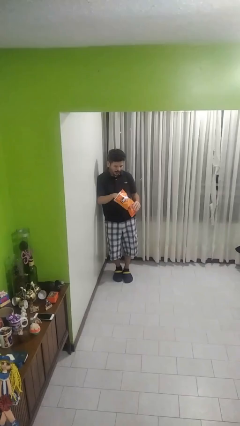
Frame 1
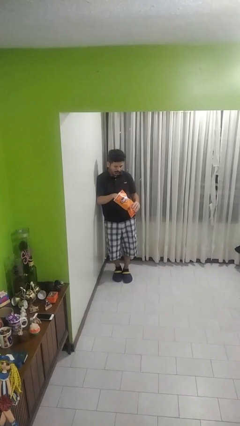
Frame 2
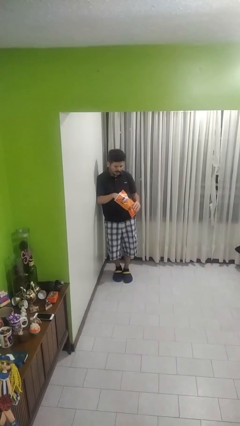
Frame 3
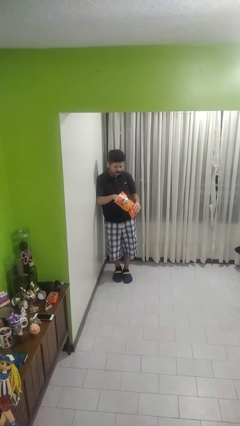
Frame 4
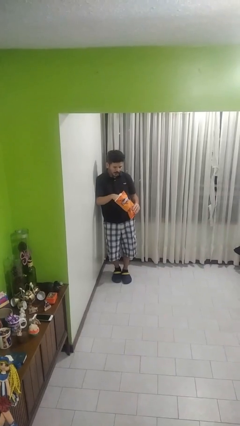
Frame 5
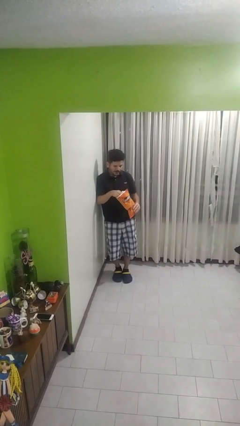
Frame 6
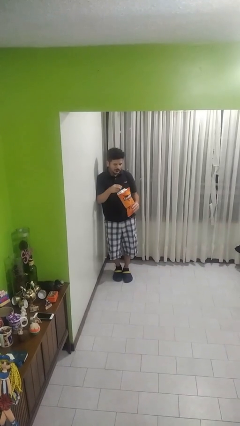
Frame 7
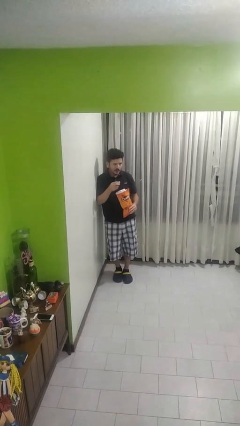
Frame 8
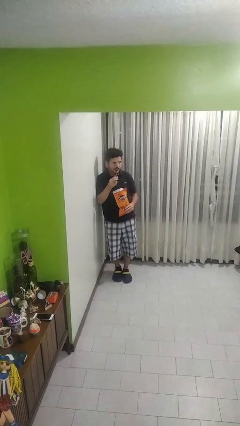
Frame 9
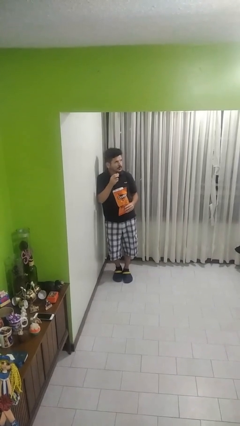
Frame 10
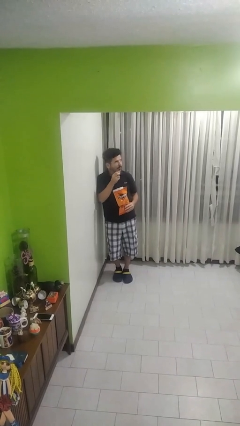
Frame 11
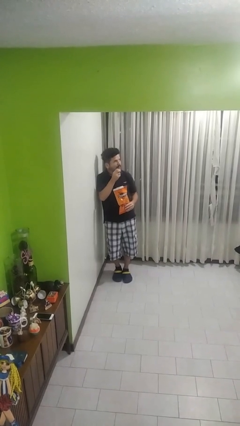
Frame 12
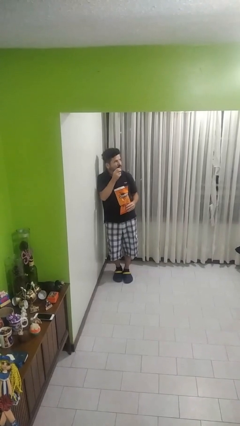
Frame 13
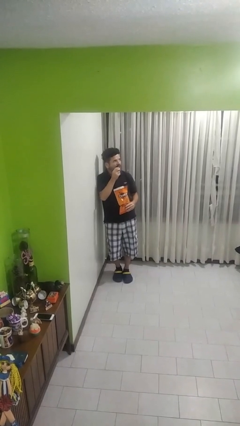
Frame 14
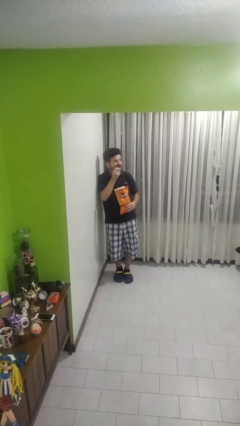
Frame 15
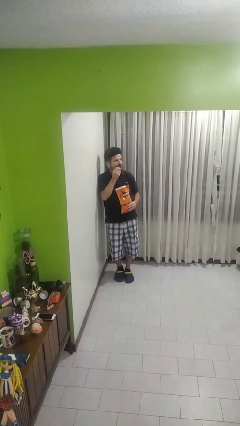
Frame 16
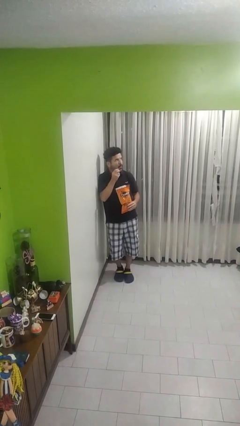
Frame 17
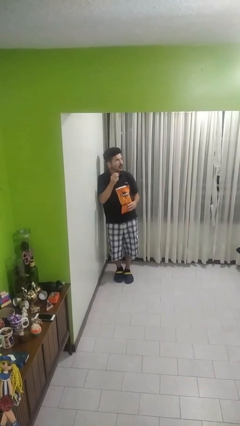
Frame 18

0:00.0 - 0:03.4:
person eats snack from bag

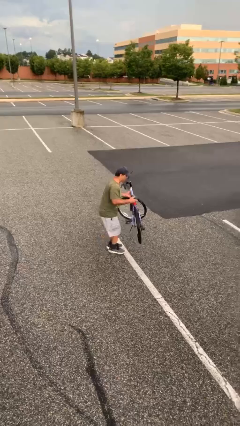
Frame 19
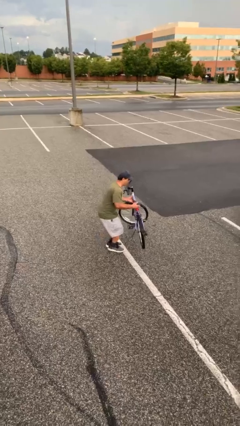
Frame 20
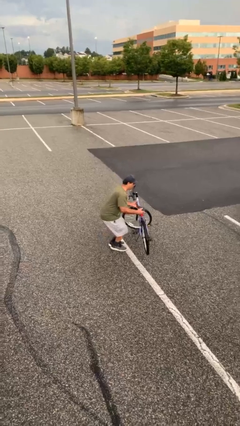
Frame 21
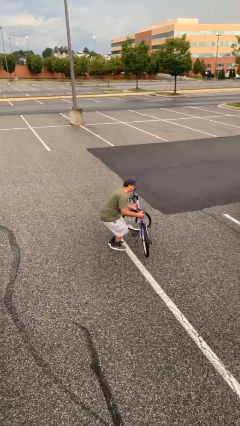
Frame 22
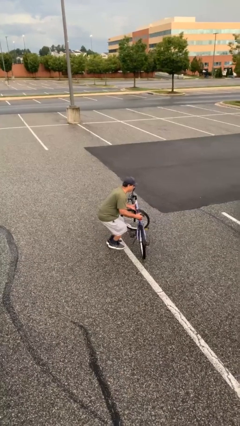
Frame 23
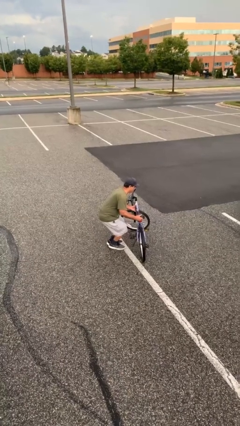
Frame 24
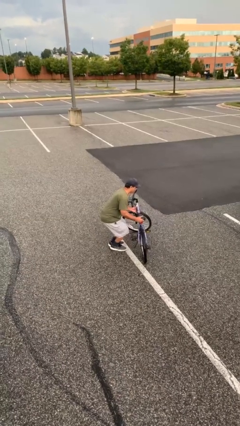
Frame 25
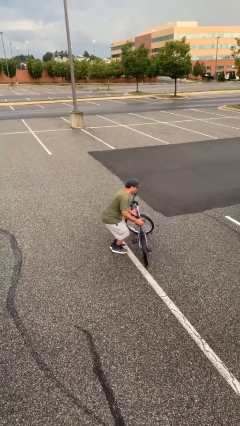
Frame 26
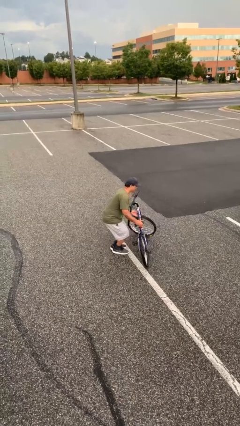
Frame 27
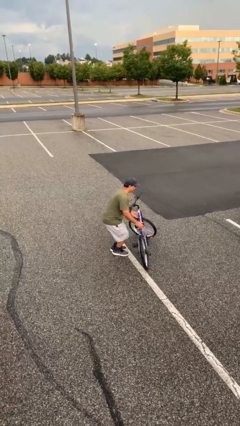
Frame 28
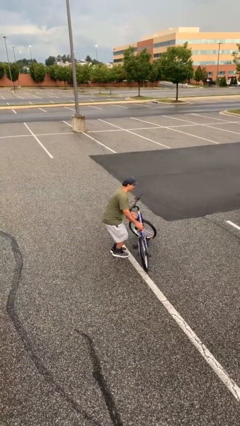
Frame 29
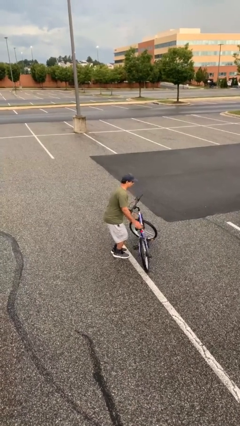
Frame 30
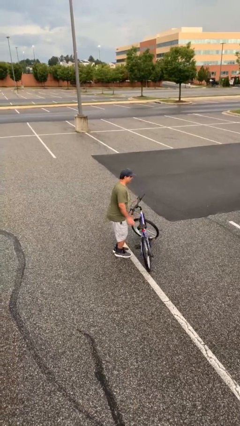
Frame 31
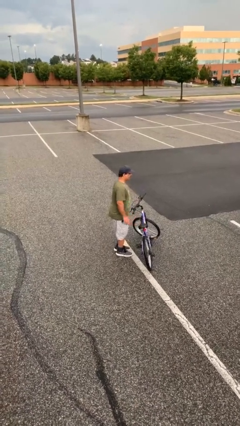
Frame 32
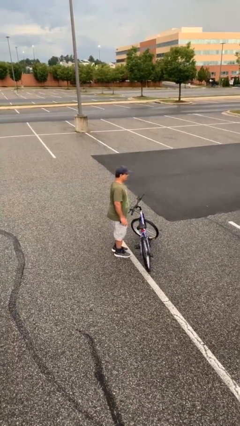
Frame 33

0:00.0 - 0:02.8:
person puts down object on floor

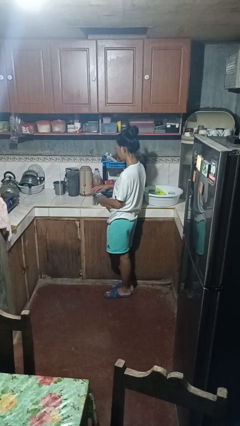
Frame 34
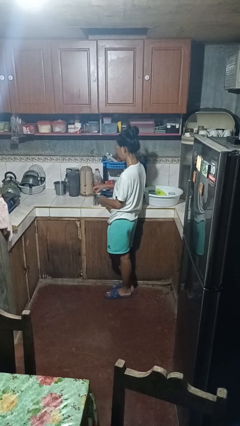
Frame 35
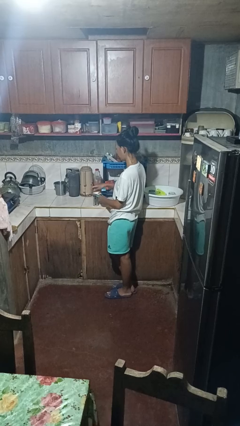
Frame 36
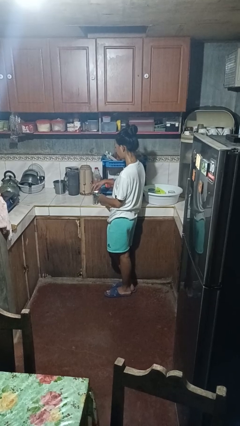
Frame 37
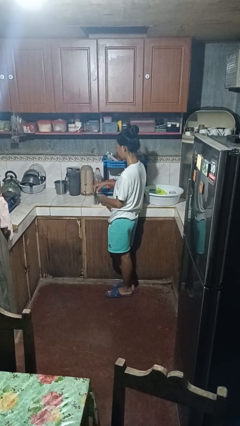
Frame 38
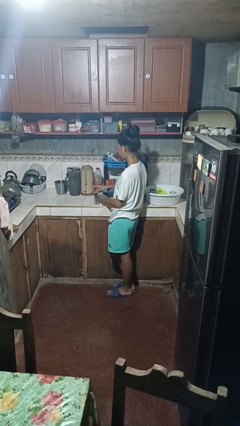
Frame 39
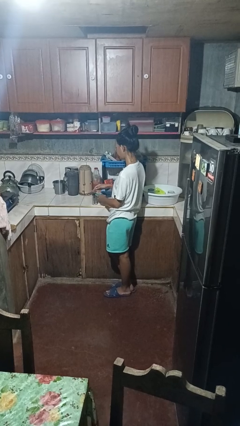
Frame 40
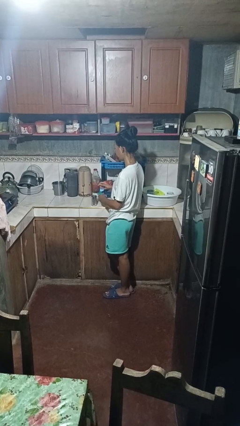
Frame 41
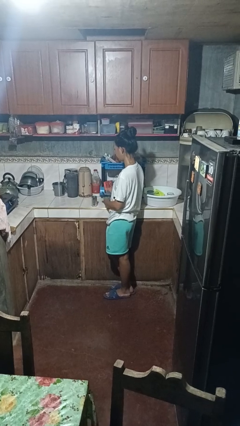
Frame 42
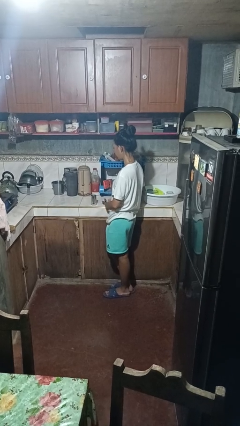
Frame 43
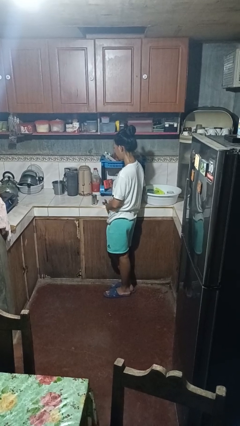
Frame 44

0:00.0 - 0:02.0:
person opens can with can opener

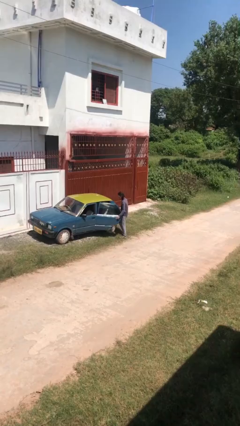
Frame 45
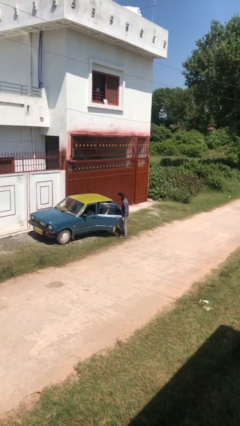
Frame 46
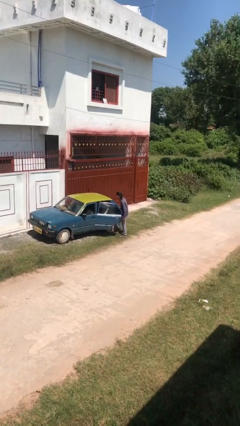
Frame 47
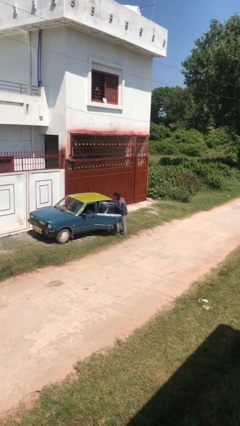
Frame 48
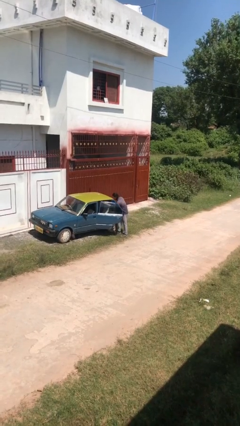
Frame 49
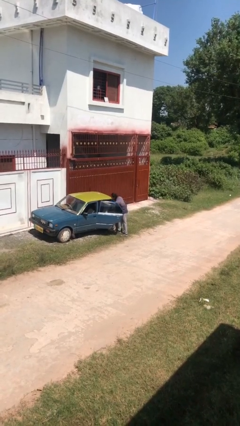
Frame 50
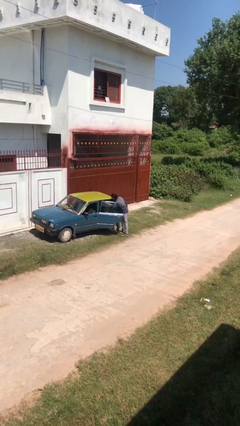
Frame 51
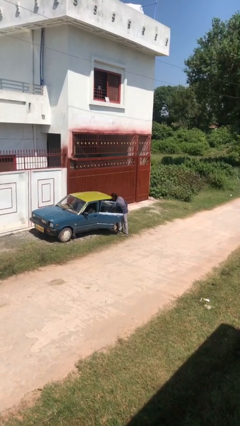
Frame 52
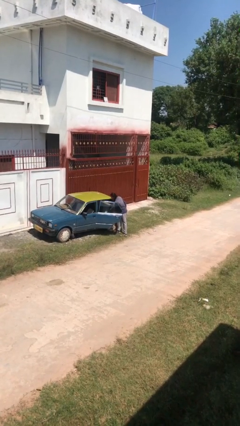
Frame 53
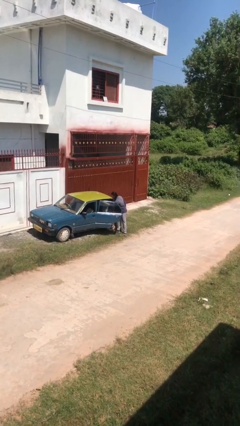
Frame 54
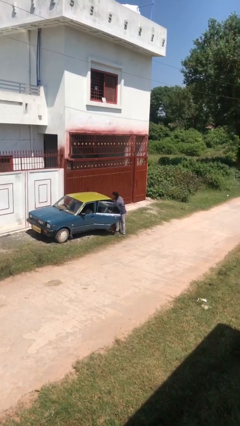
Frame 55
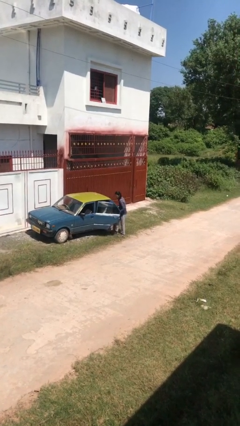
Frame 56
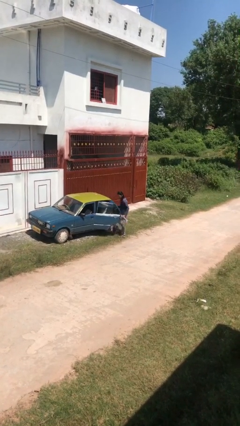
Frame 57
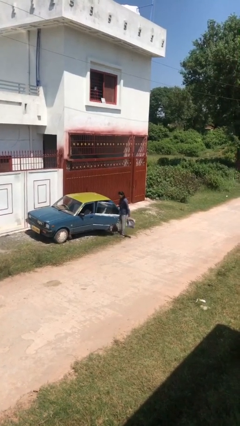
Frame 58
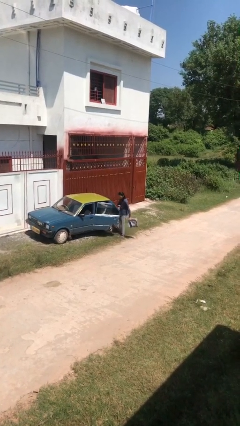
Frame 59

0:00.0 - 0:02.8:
person unloads car

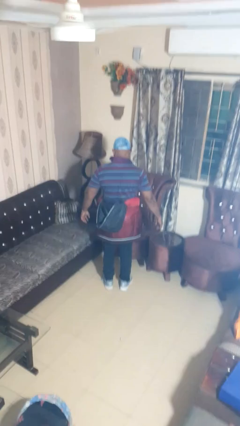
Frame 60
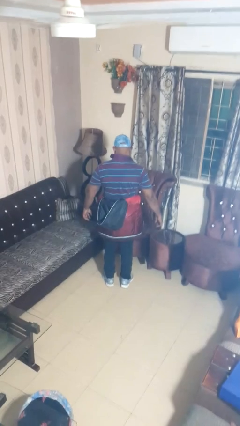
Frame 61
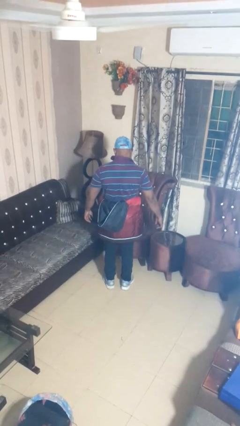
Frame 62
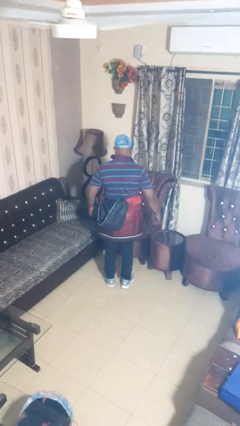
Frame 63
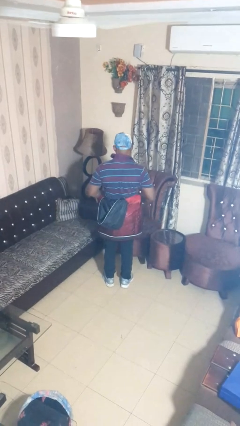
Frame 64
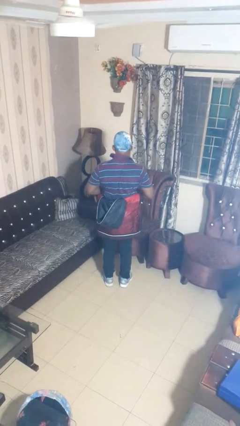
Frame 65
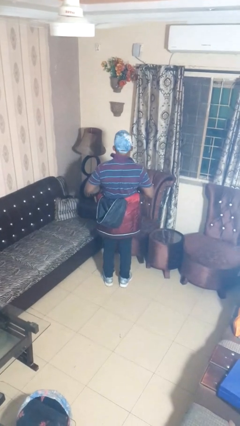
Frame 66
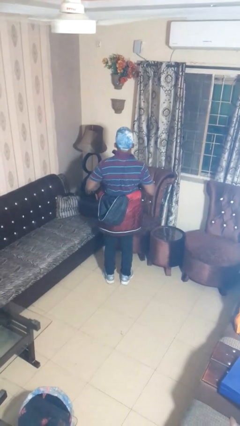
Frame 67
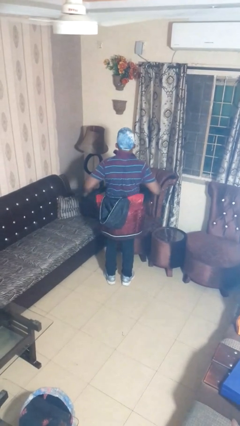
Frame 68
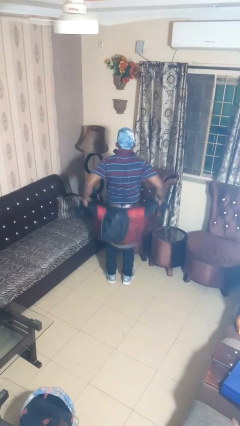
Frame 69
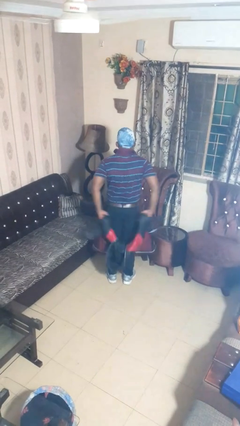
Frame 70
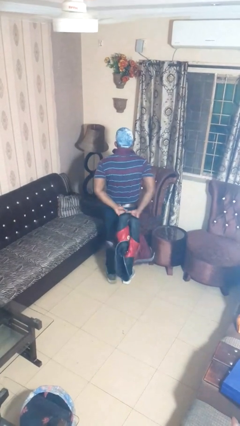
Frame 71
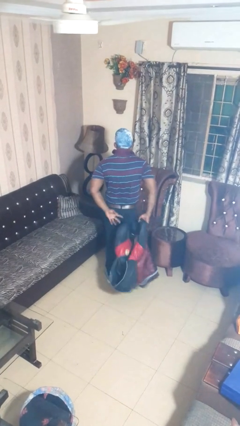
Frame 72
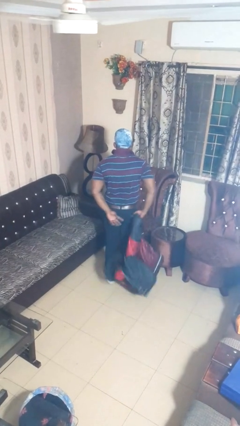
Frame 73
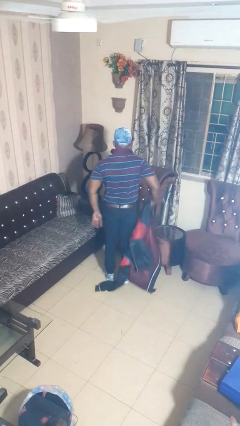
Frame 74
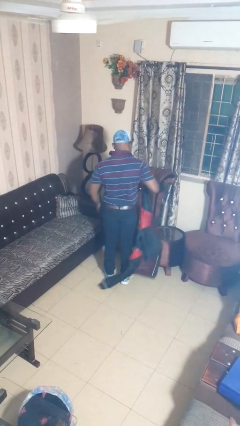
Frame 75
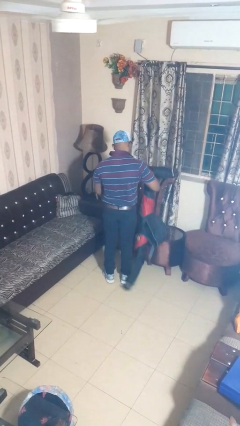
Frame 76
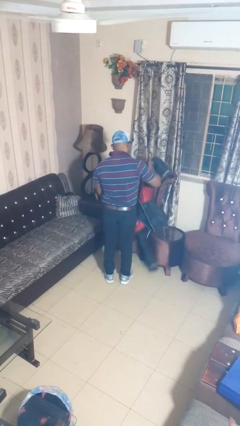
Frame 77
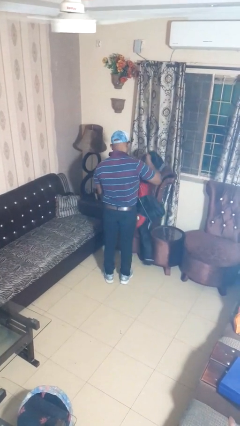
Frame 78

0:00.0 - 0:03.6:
person unties jacket around waist

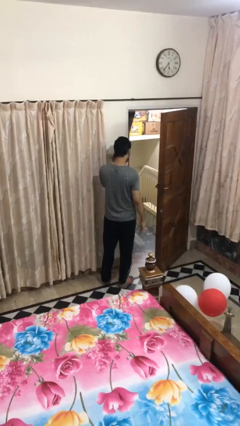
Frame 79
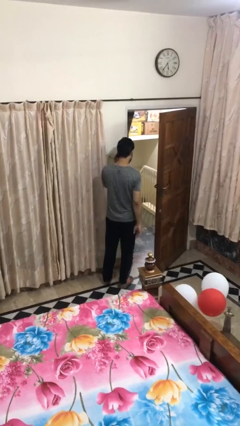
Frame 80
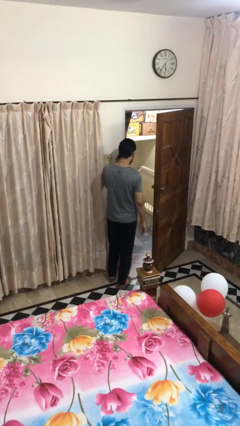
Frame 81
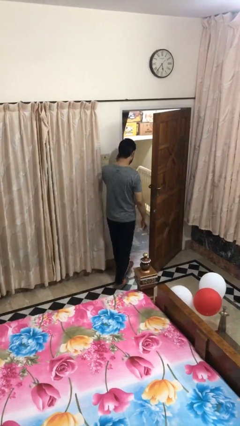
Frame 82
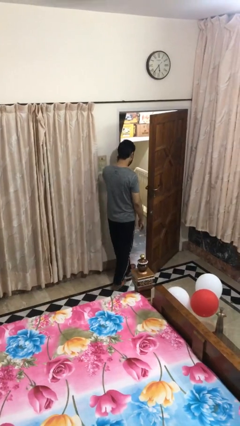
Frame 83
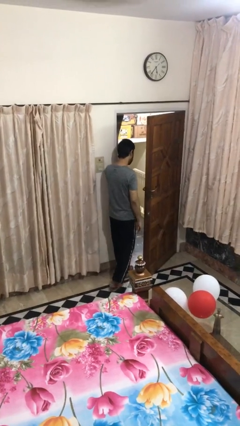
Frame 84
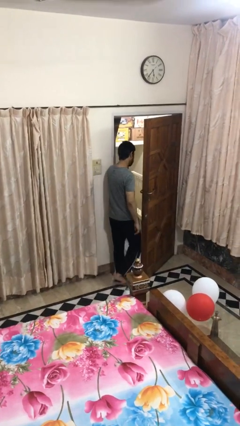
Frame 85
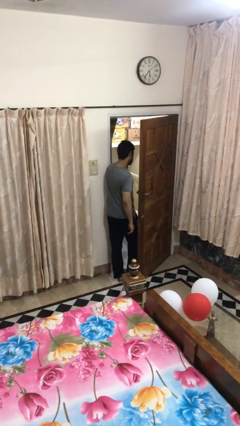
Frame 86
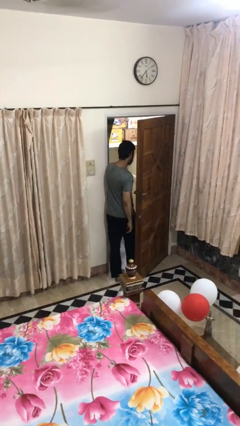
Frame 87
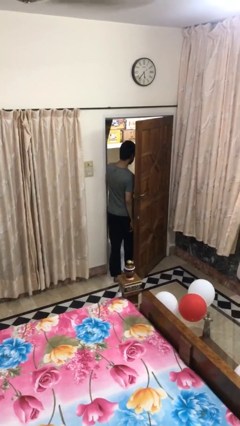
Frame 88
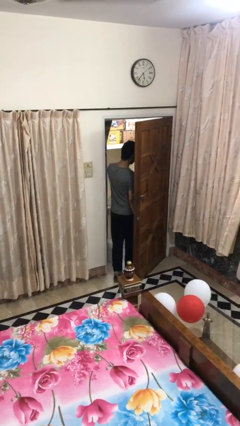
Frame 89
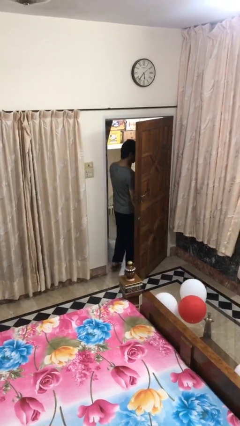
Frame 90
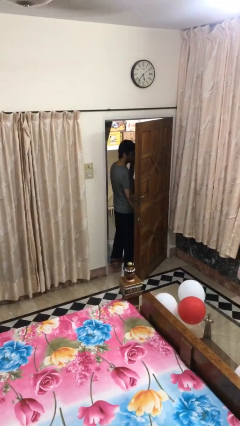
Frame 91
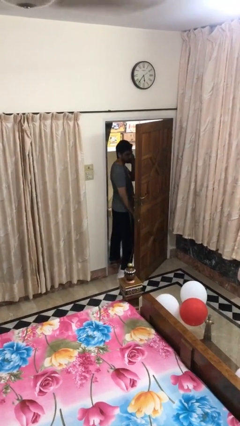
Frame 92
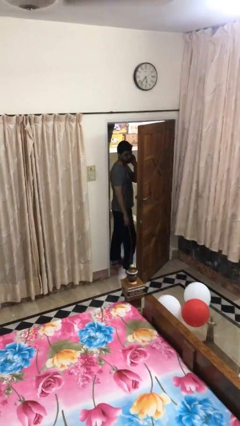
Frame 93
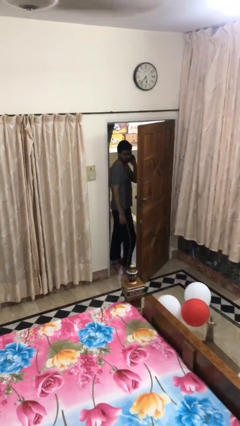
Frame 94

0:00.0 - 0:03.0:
person exits scene through structure
